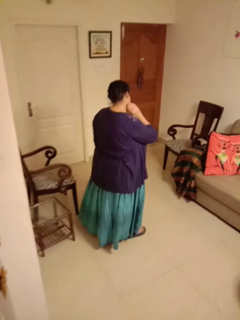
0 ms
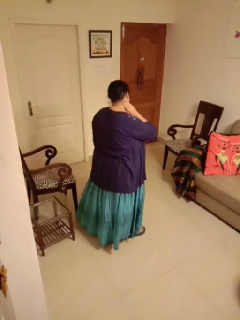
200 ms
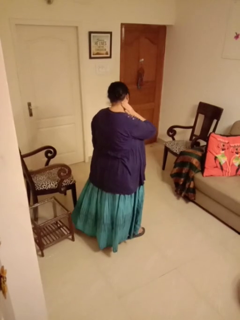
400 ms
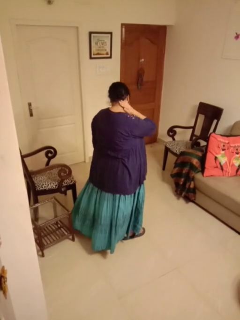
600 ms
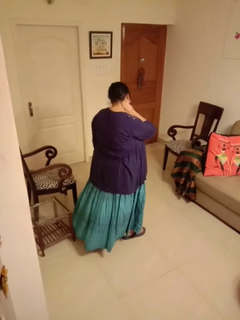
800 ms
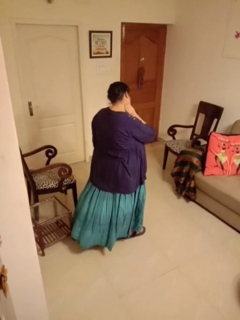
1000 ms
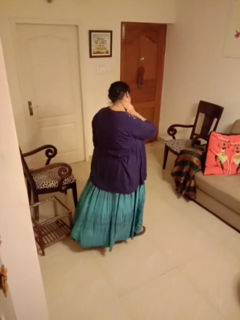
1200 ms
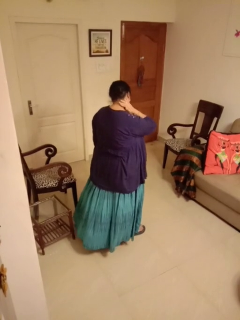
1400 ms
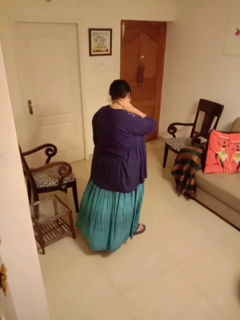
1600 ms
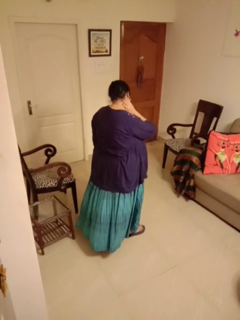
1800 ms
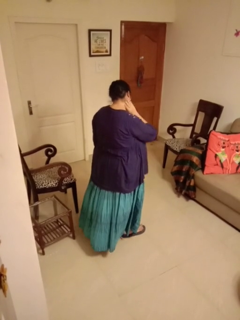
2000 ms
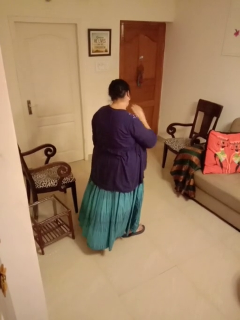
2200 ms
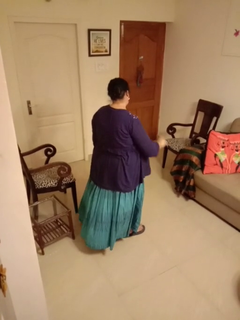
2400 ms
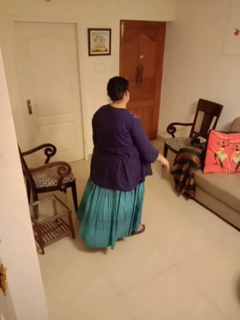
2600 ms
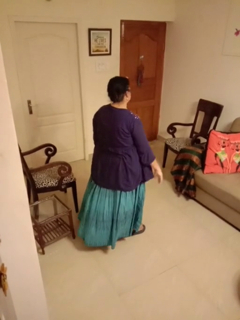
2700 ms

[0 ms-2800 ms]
person rubs neck

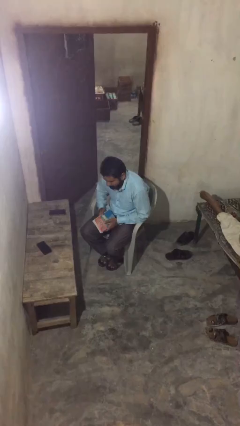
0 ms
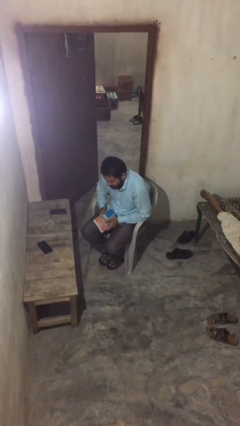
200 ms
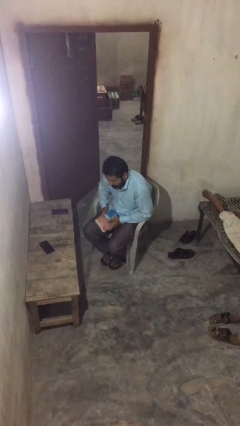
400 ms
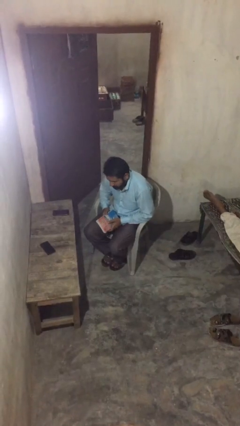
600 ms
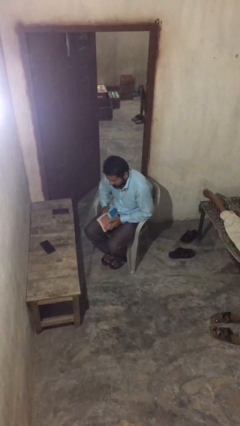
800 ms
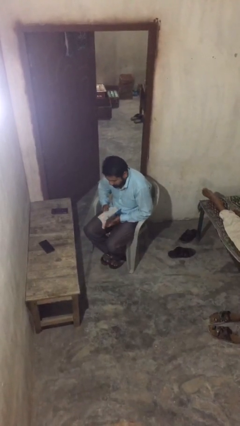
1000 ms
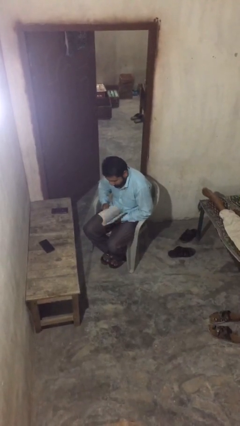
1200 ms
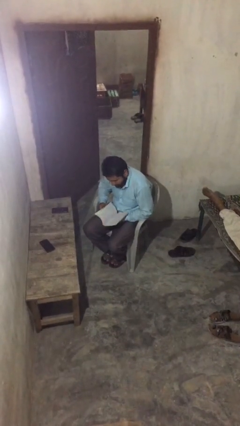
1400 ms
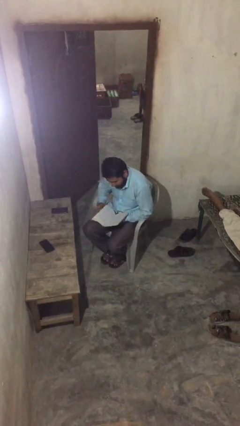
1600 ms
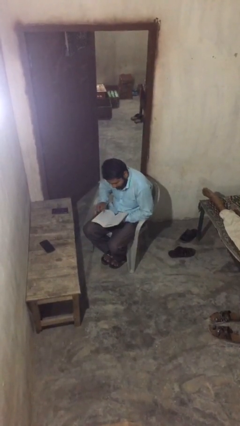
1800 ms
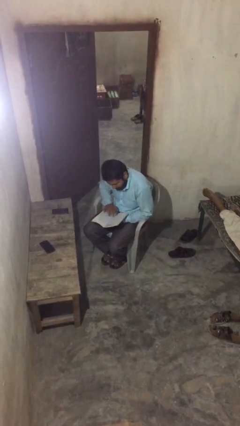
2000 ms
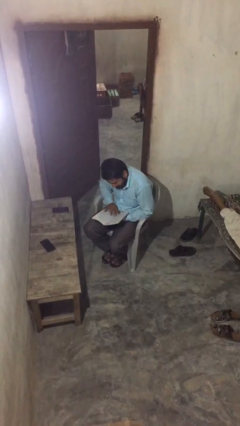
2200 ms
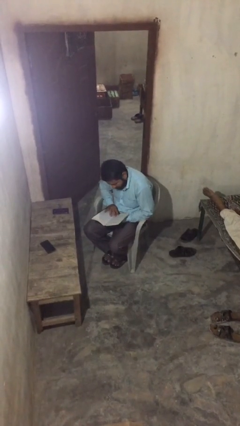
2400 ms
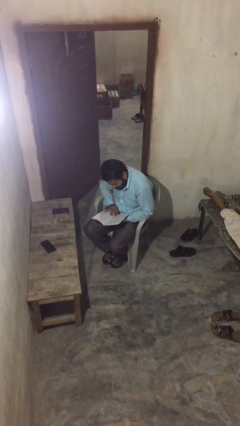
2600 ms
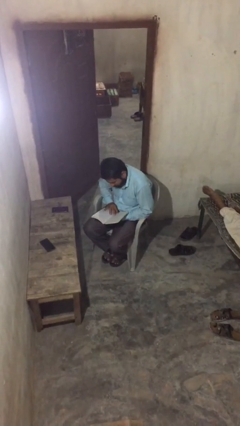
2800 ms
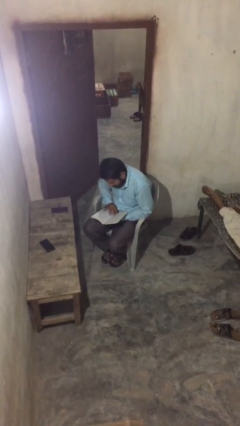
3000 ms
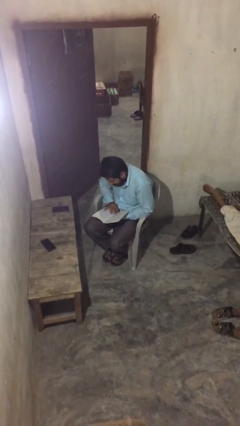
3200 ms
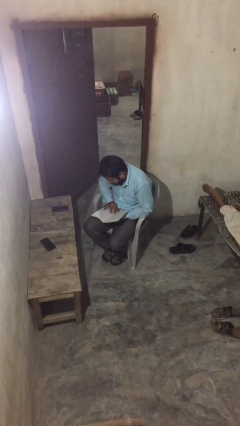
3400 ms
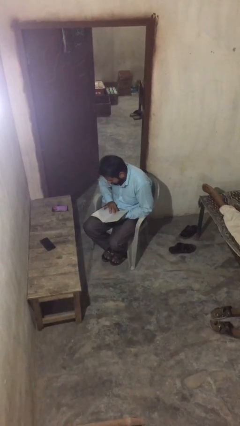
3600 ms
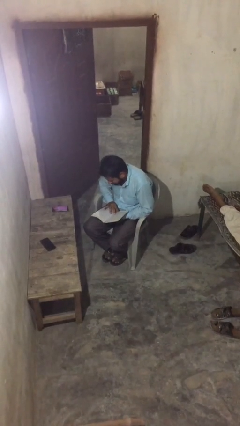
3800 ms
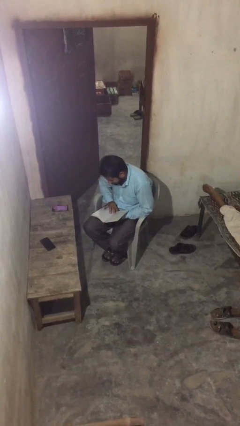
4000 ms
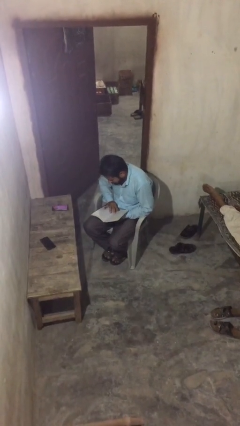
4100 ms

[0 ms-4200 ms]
person reads document

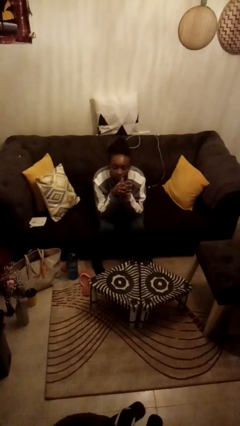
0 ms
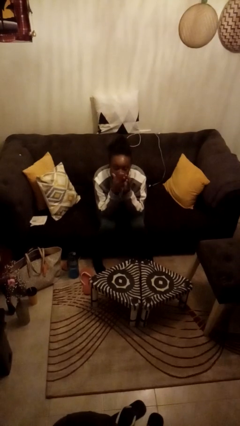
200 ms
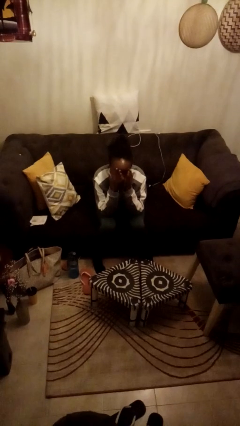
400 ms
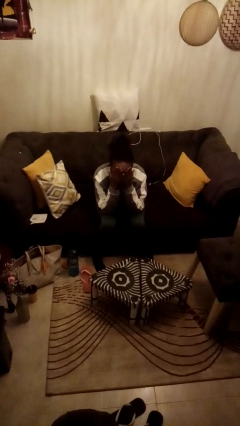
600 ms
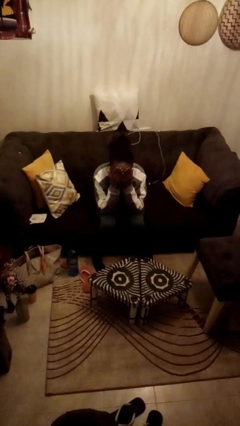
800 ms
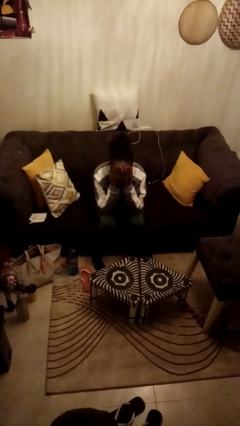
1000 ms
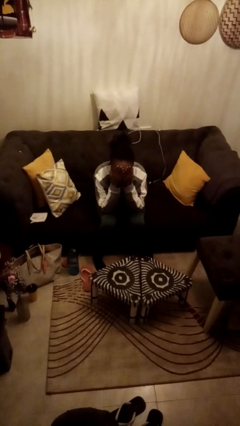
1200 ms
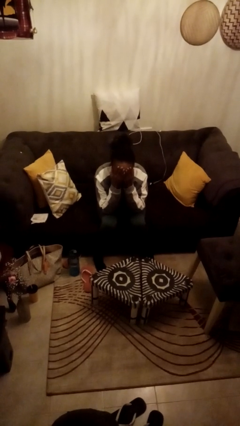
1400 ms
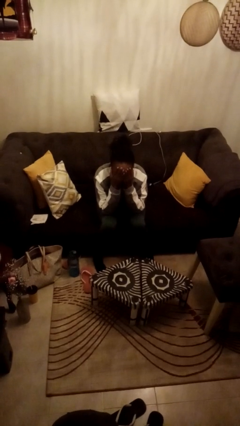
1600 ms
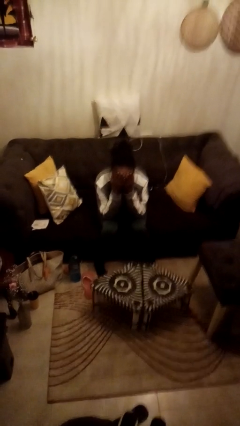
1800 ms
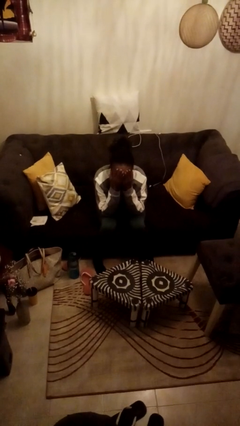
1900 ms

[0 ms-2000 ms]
person covers face with hands

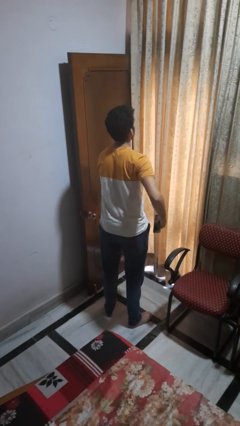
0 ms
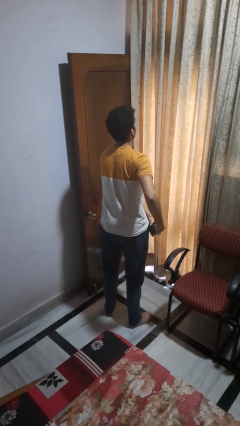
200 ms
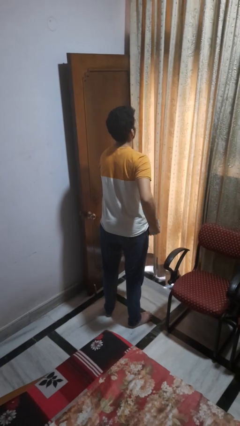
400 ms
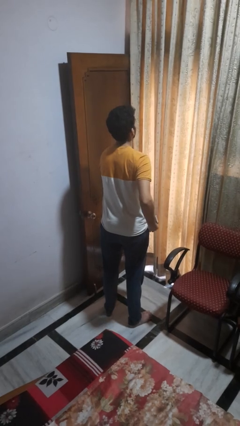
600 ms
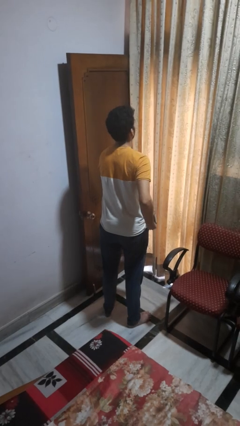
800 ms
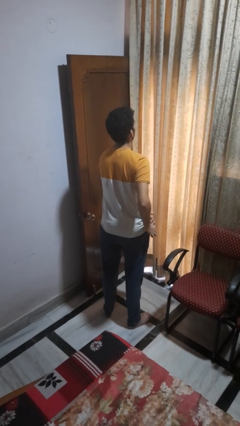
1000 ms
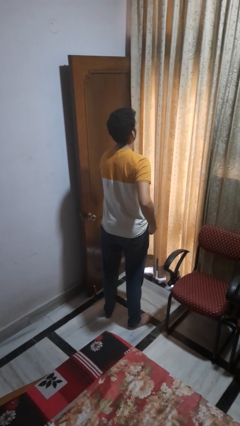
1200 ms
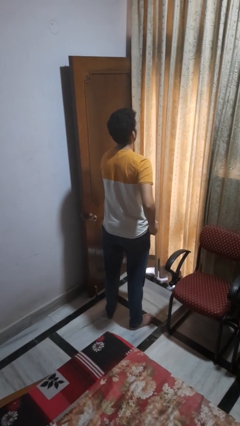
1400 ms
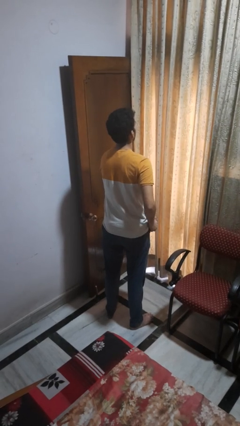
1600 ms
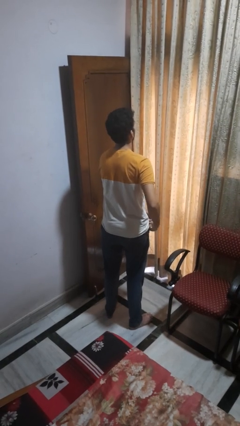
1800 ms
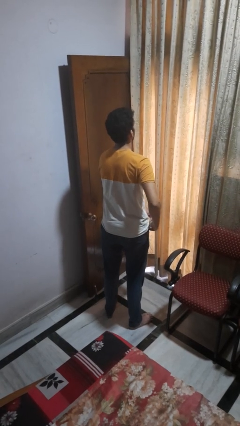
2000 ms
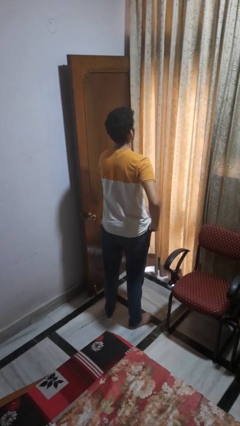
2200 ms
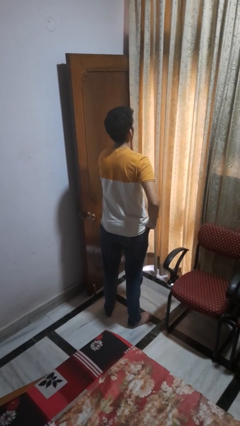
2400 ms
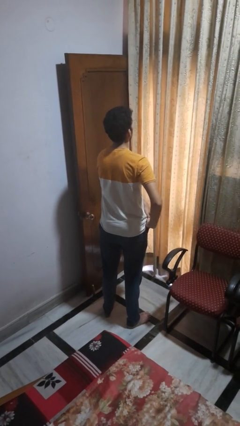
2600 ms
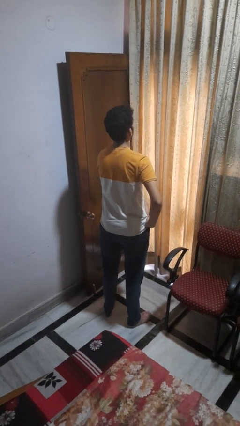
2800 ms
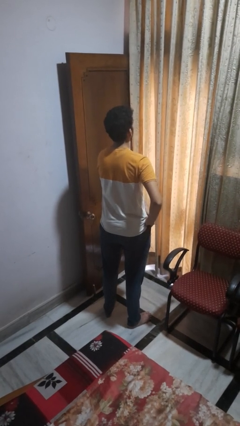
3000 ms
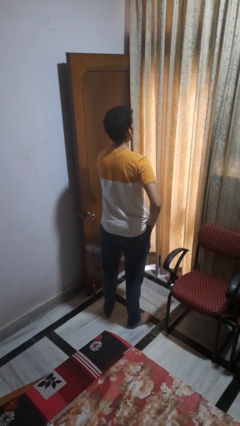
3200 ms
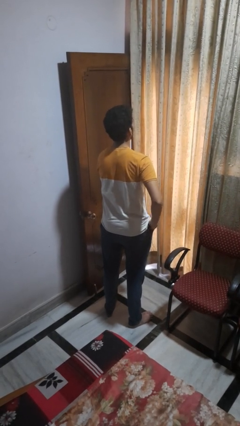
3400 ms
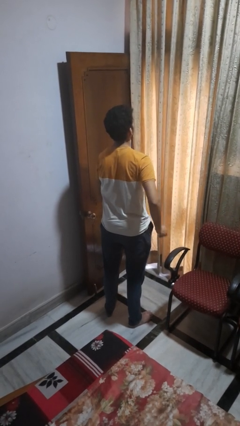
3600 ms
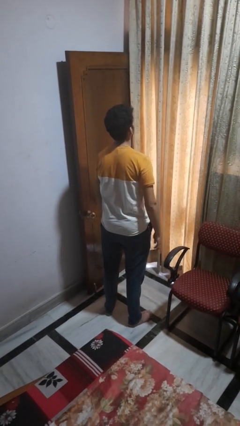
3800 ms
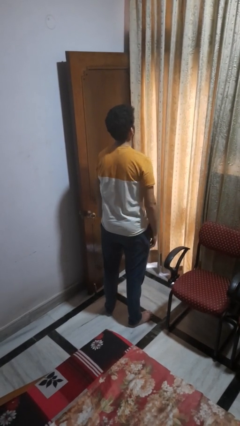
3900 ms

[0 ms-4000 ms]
person puts phone into pocket

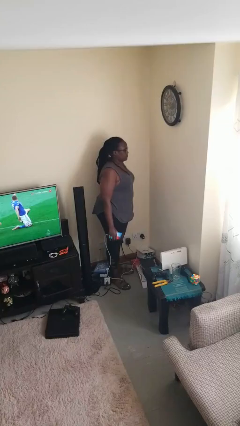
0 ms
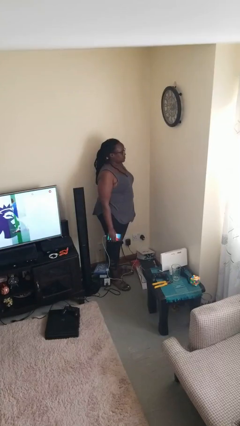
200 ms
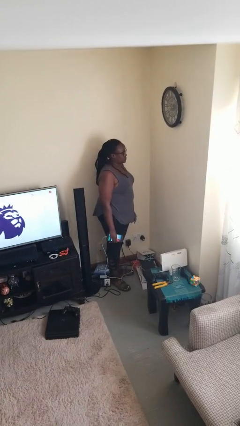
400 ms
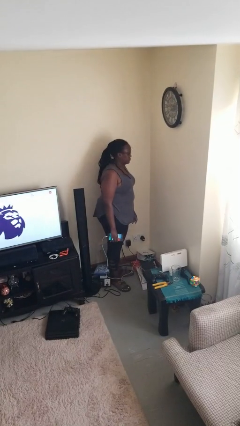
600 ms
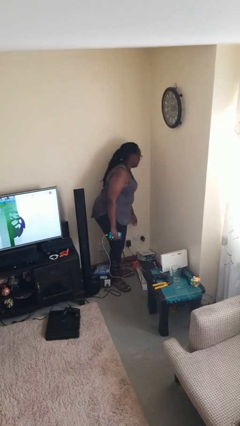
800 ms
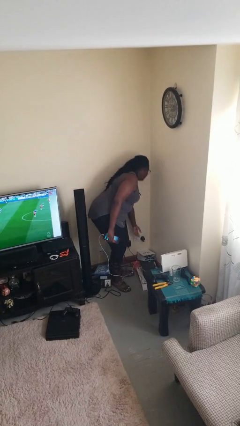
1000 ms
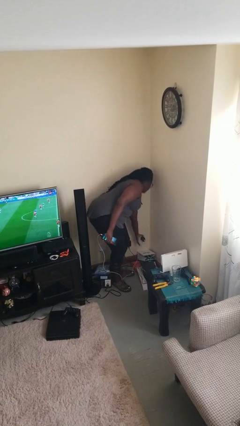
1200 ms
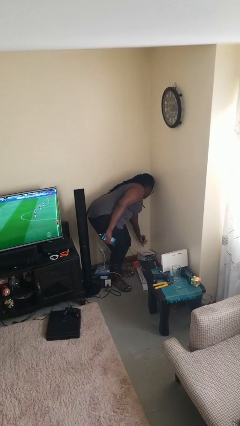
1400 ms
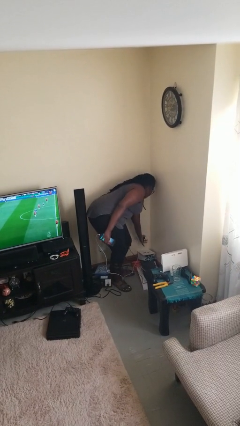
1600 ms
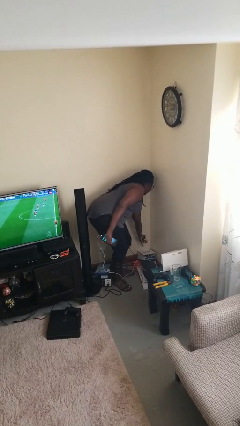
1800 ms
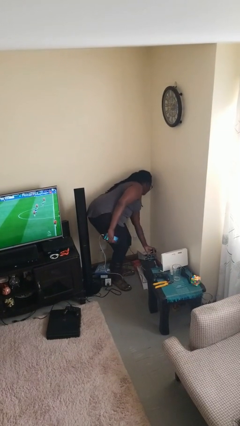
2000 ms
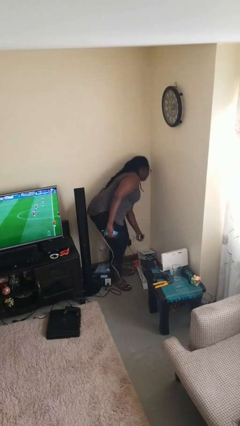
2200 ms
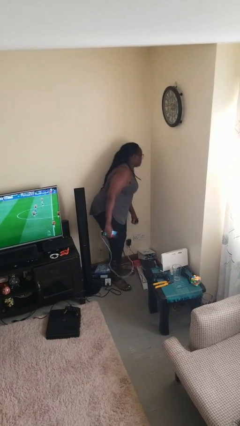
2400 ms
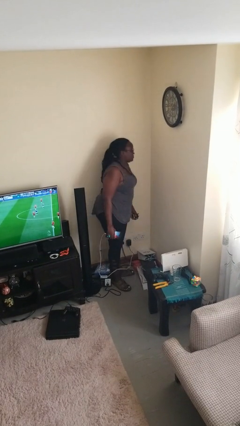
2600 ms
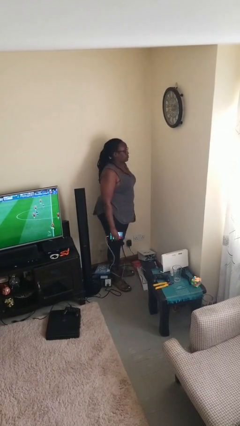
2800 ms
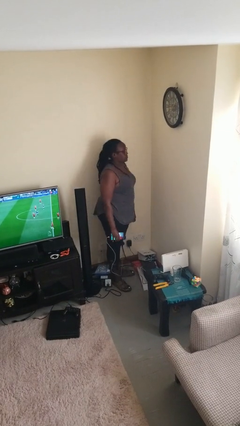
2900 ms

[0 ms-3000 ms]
person unplugs from electrical socket

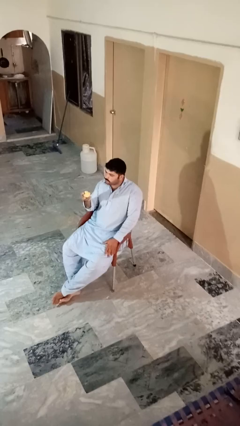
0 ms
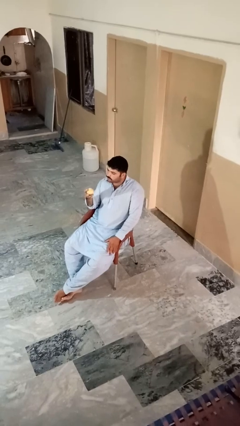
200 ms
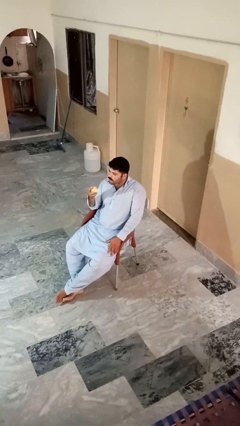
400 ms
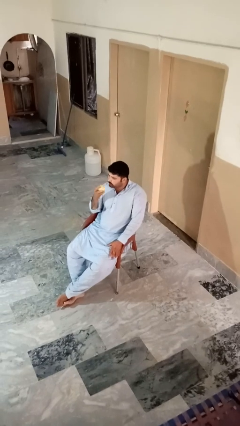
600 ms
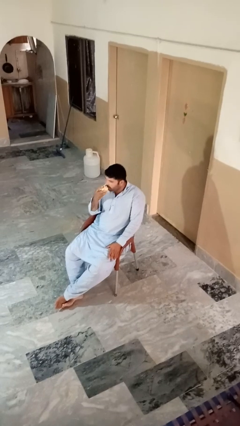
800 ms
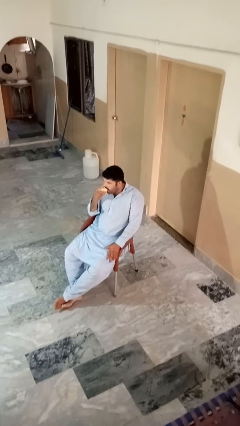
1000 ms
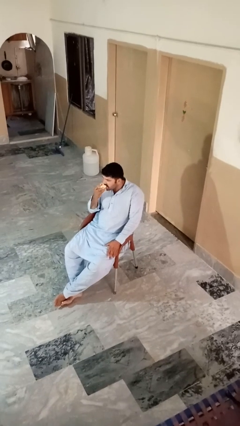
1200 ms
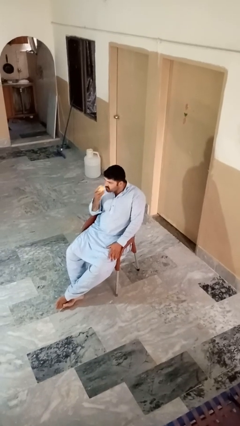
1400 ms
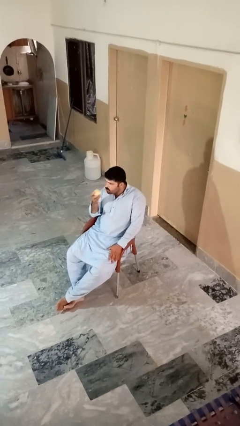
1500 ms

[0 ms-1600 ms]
person eats apple

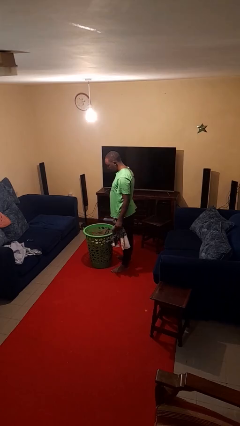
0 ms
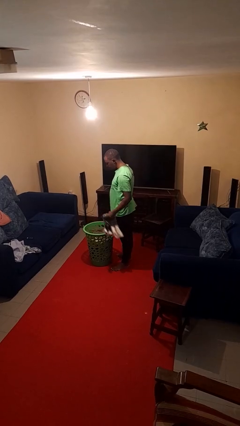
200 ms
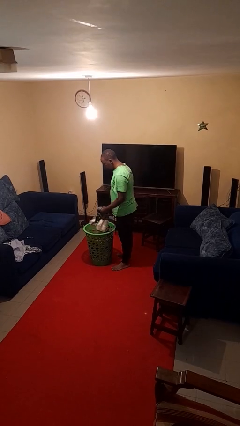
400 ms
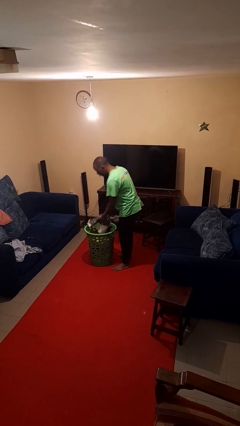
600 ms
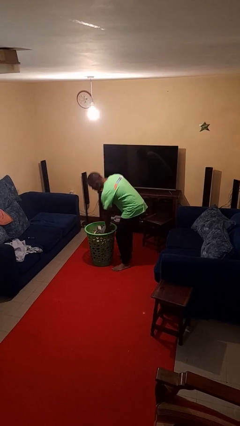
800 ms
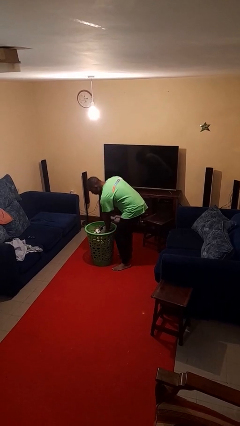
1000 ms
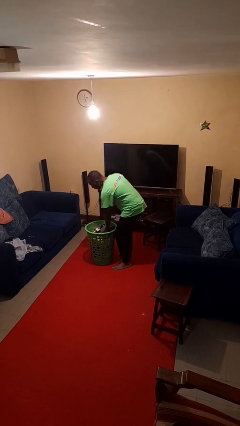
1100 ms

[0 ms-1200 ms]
person puts object into basket
